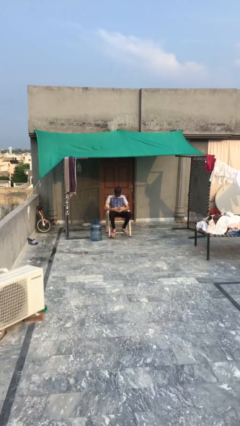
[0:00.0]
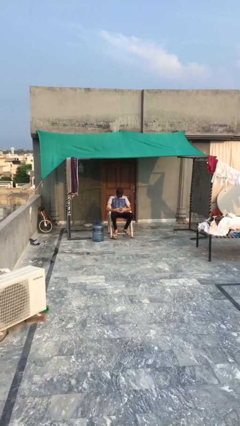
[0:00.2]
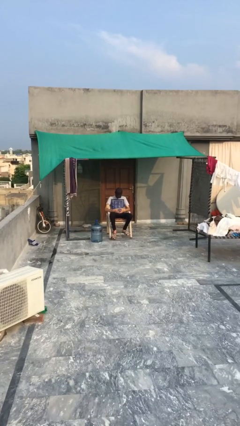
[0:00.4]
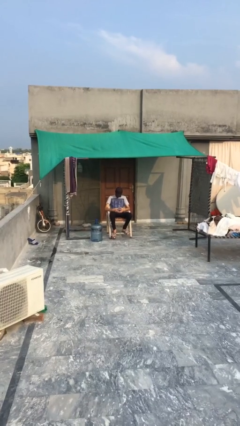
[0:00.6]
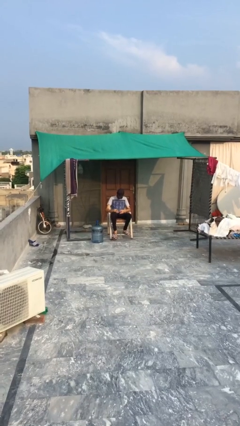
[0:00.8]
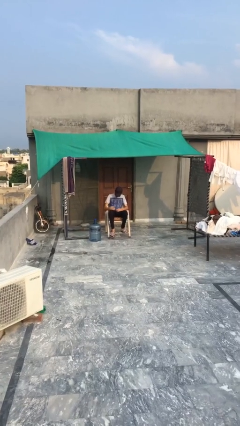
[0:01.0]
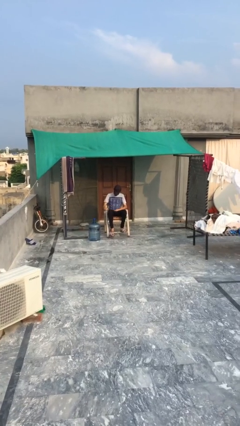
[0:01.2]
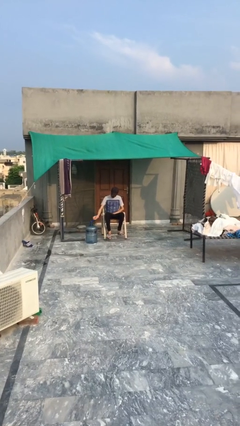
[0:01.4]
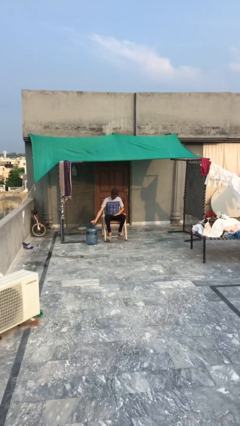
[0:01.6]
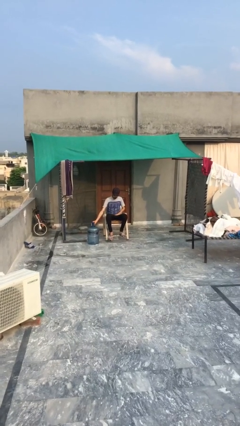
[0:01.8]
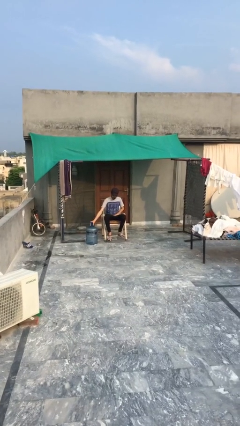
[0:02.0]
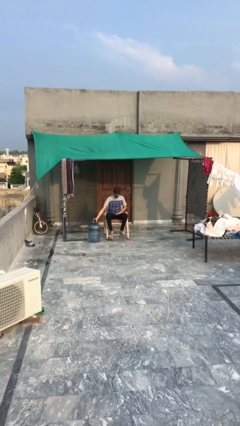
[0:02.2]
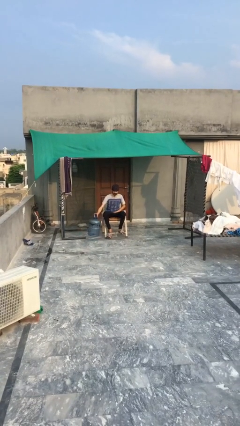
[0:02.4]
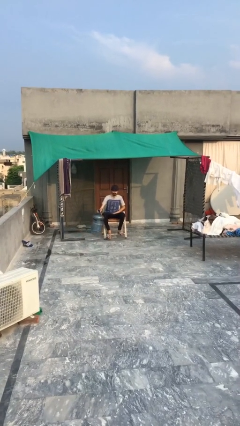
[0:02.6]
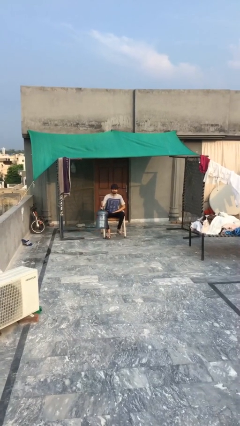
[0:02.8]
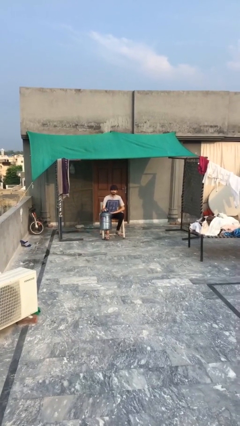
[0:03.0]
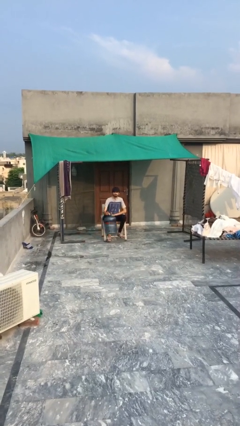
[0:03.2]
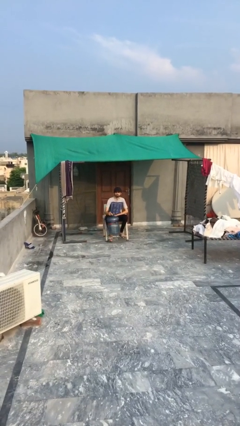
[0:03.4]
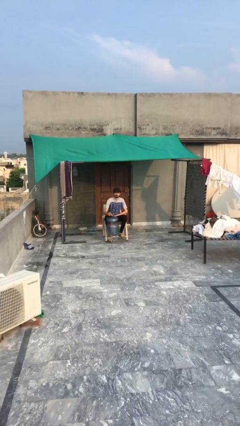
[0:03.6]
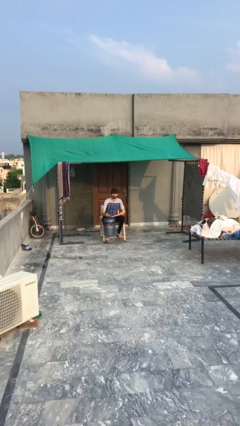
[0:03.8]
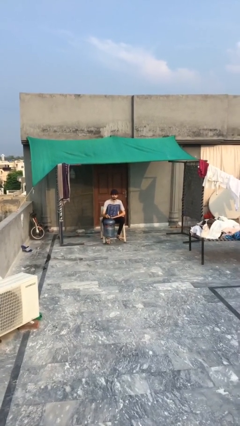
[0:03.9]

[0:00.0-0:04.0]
person picks up object from floor

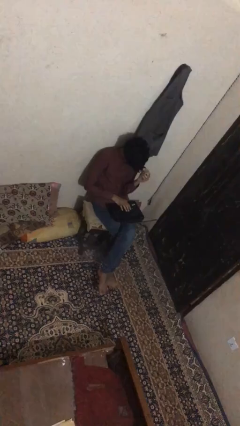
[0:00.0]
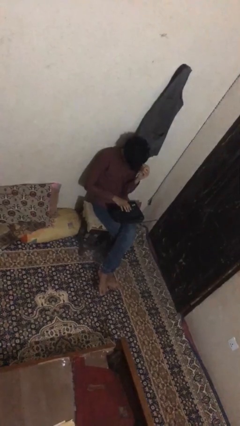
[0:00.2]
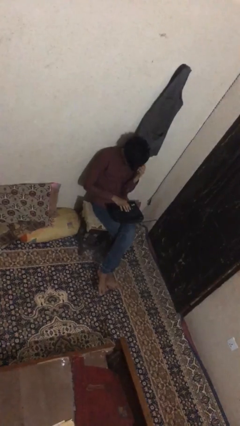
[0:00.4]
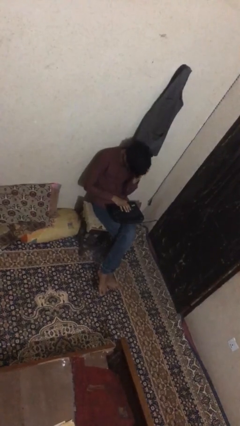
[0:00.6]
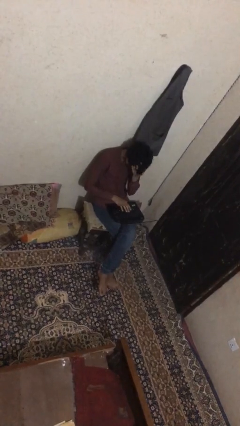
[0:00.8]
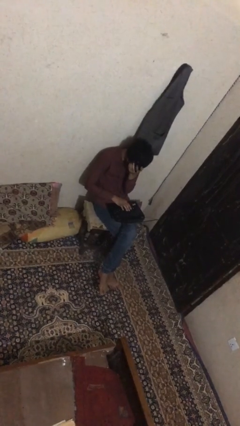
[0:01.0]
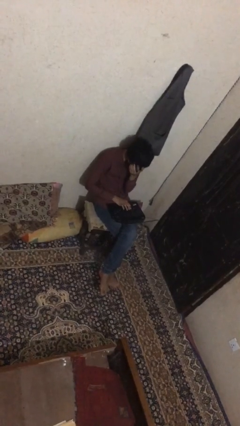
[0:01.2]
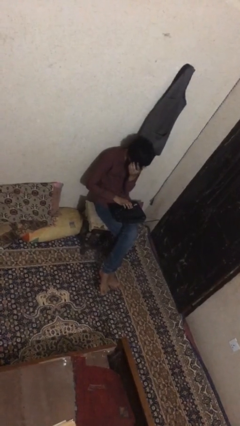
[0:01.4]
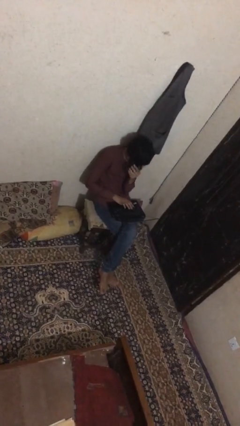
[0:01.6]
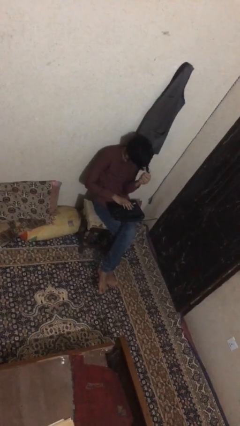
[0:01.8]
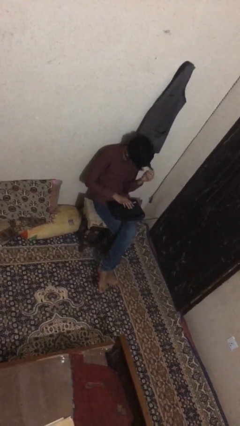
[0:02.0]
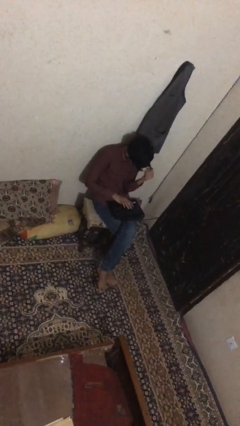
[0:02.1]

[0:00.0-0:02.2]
person interacts with laptop

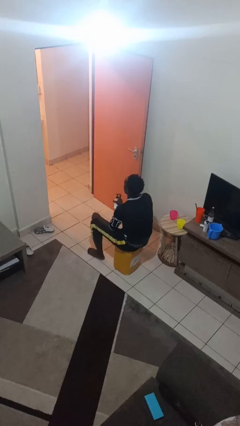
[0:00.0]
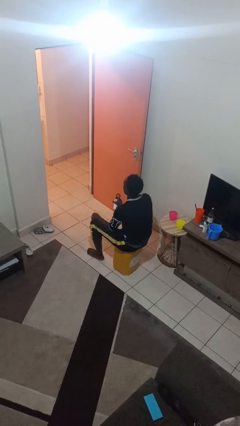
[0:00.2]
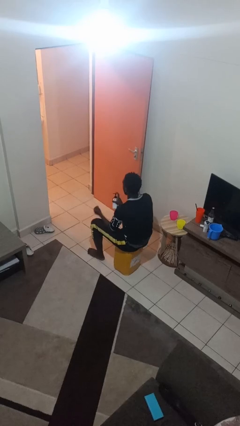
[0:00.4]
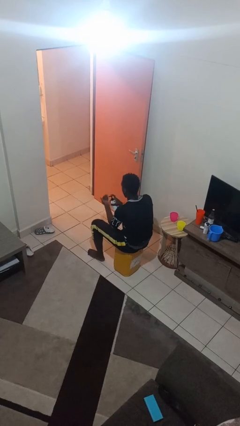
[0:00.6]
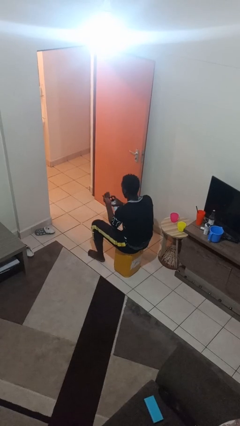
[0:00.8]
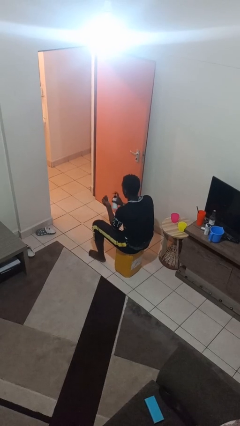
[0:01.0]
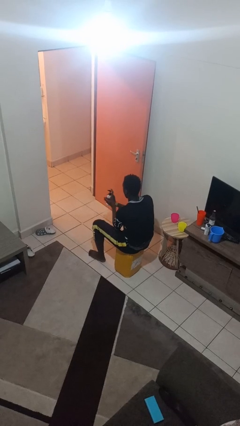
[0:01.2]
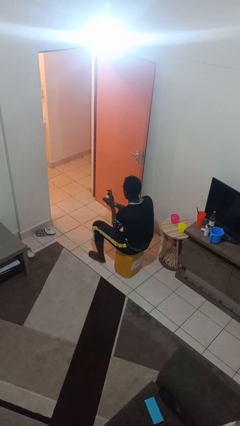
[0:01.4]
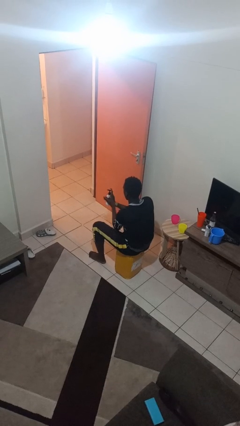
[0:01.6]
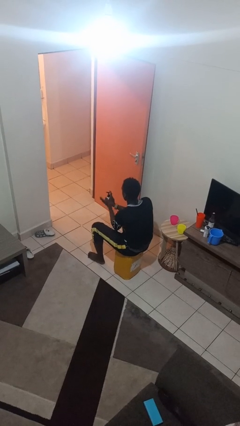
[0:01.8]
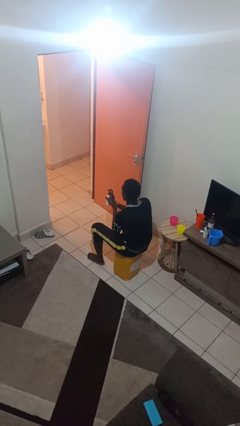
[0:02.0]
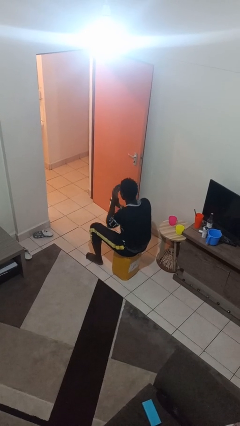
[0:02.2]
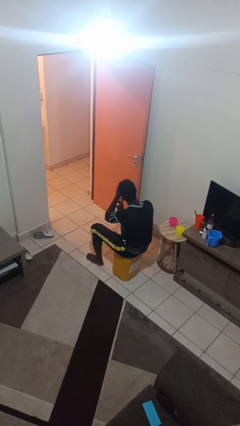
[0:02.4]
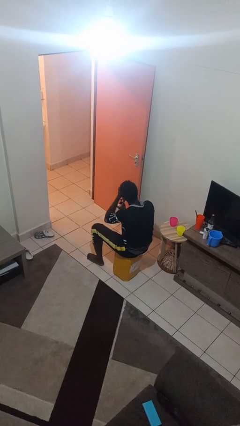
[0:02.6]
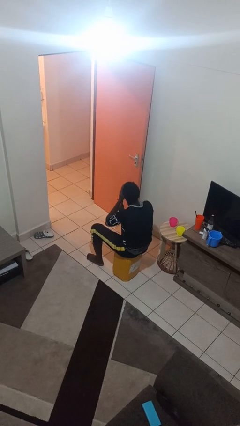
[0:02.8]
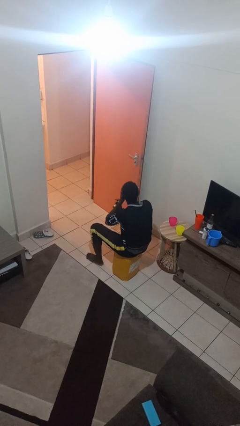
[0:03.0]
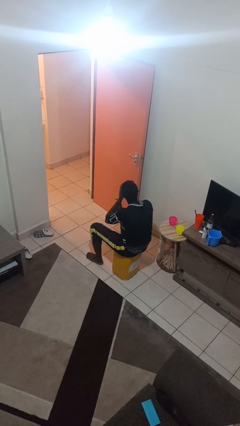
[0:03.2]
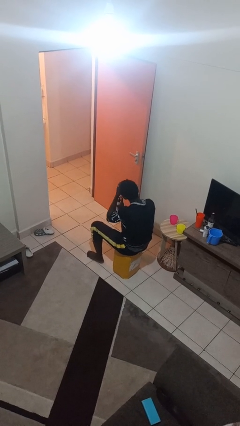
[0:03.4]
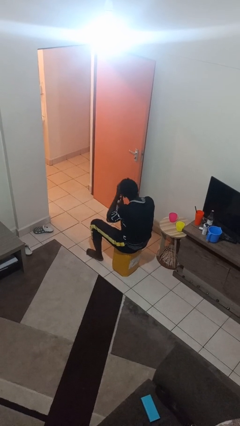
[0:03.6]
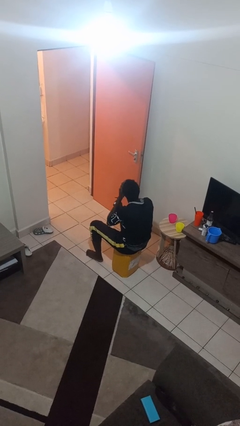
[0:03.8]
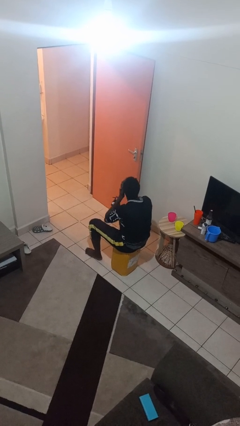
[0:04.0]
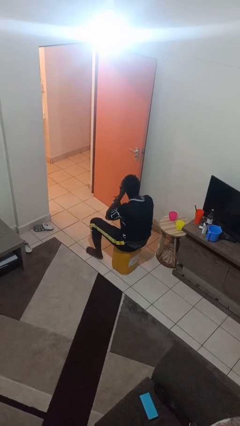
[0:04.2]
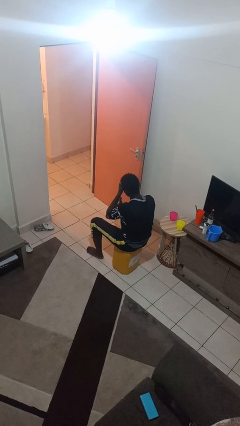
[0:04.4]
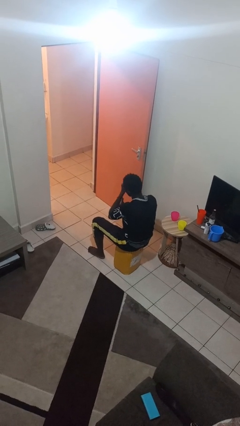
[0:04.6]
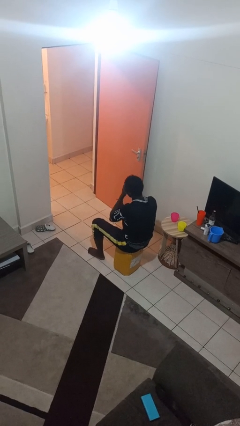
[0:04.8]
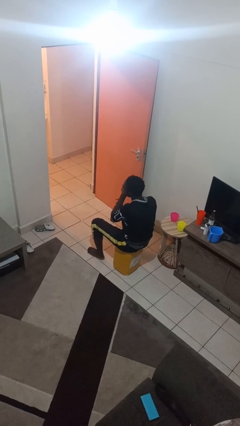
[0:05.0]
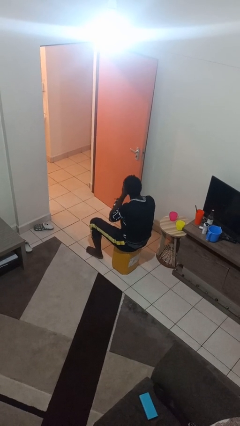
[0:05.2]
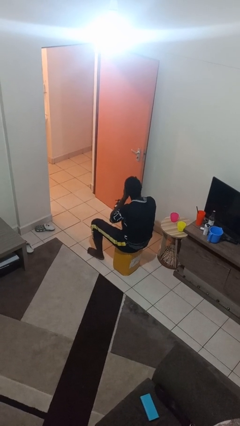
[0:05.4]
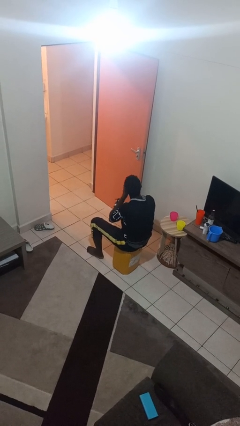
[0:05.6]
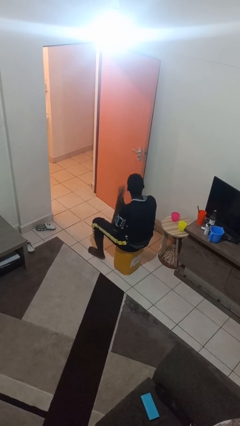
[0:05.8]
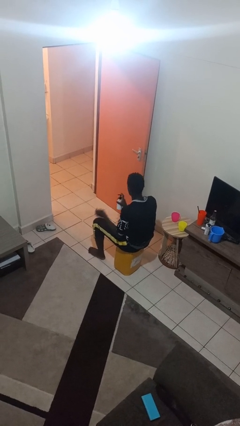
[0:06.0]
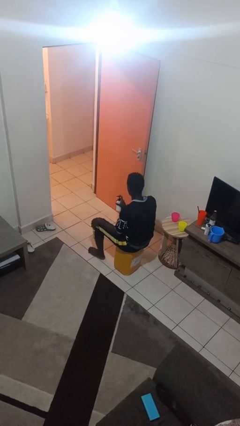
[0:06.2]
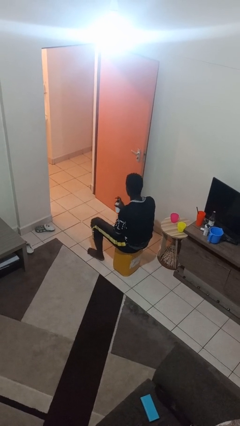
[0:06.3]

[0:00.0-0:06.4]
person applies sunscreen

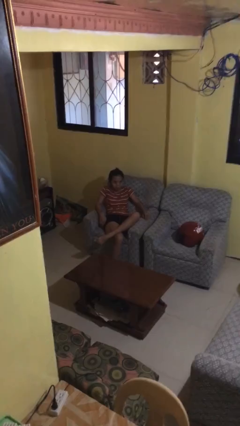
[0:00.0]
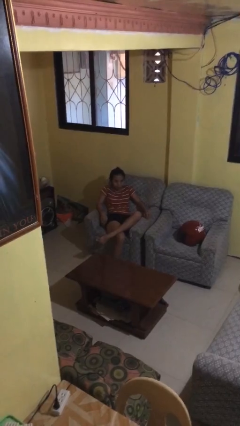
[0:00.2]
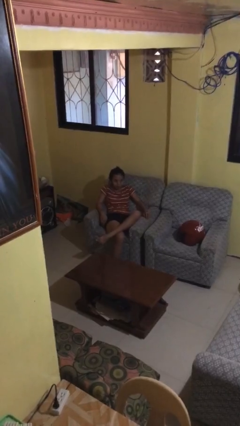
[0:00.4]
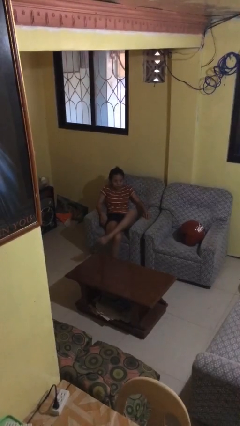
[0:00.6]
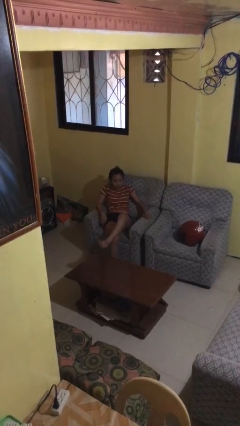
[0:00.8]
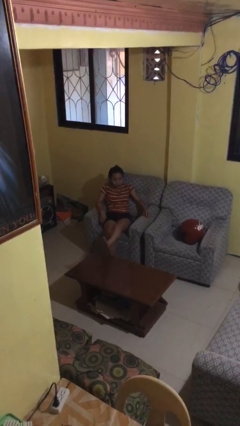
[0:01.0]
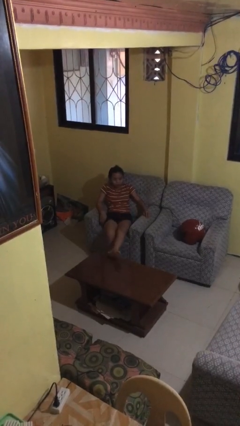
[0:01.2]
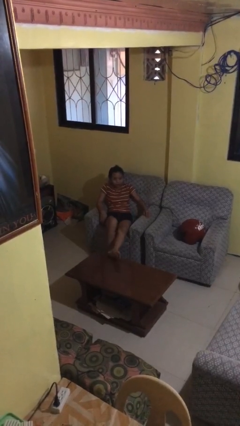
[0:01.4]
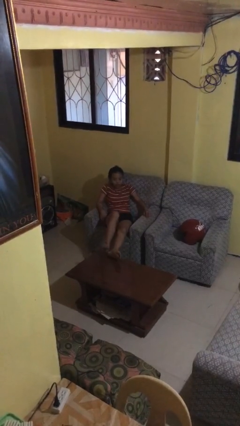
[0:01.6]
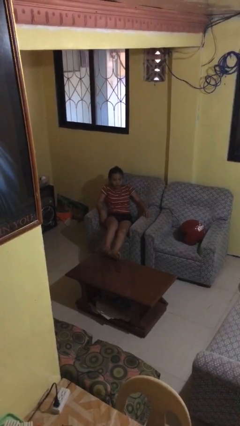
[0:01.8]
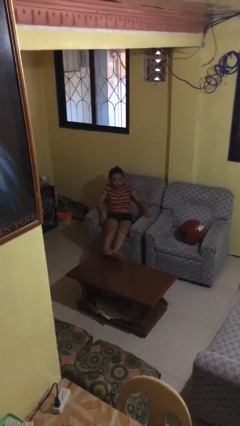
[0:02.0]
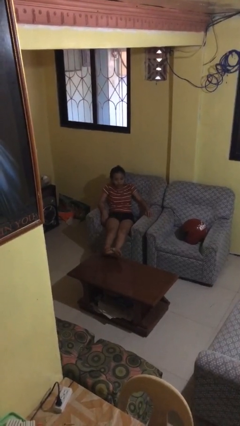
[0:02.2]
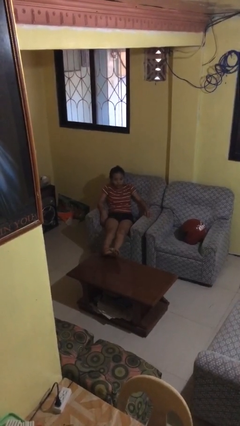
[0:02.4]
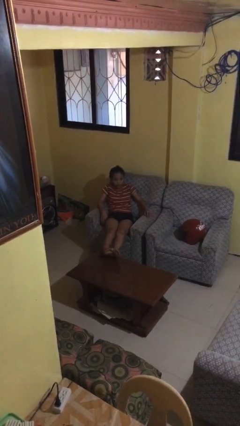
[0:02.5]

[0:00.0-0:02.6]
person puts feet up

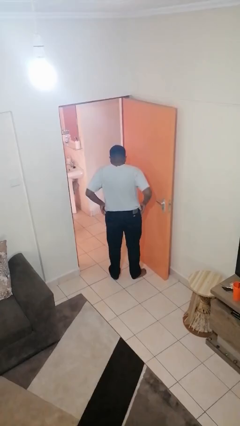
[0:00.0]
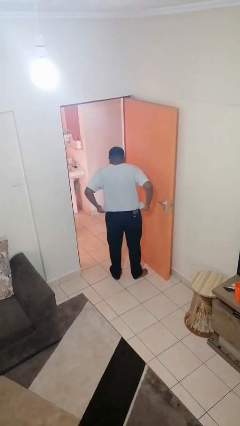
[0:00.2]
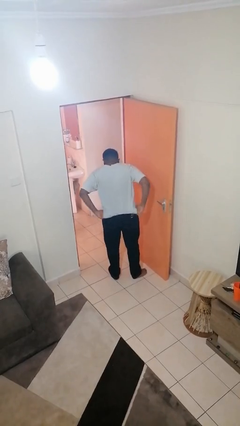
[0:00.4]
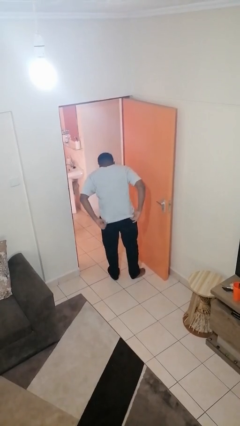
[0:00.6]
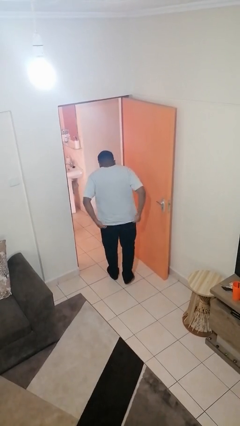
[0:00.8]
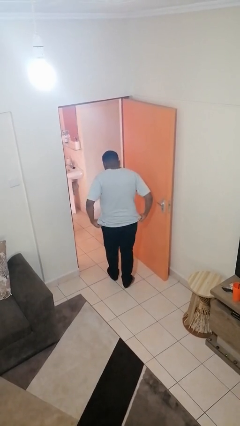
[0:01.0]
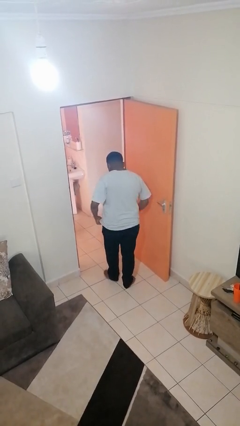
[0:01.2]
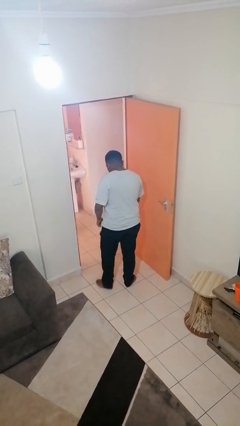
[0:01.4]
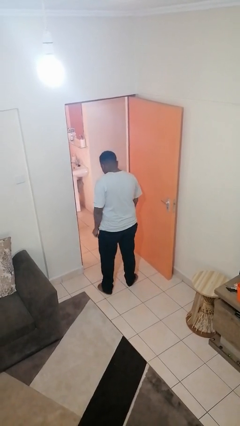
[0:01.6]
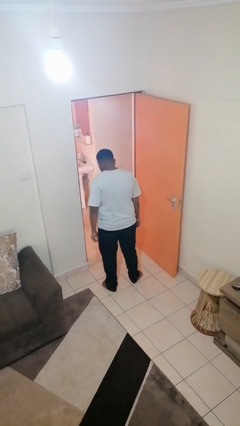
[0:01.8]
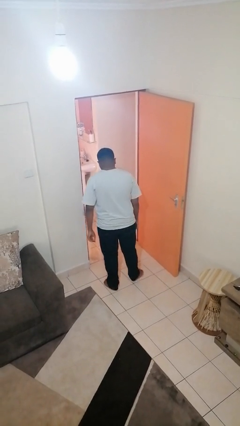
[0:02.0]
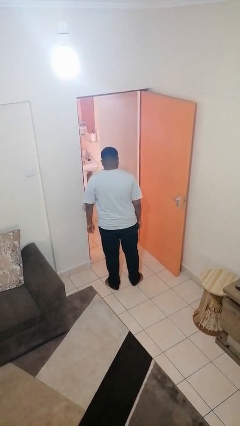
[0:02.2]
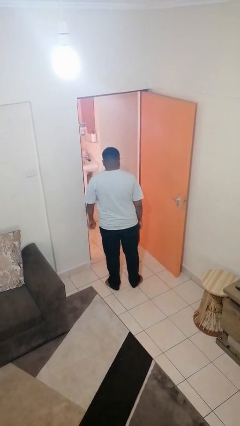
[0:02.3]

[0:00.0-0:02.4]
person untucks shirt
